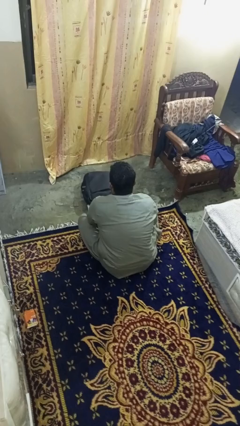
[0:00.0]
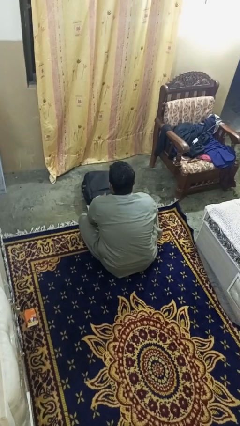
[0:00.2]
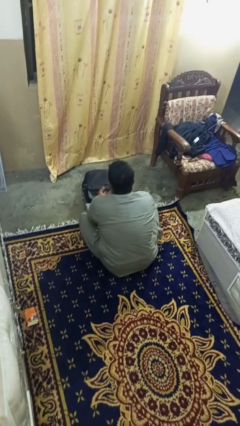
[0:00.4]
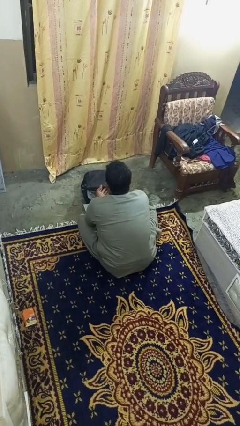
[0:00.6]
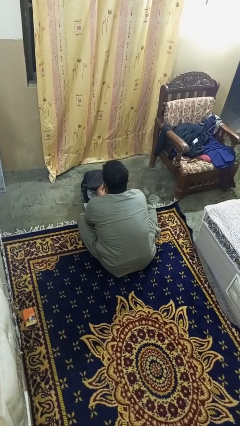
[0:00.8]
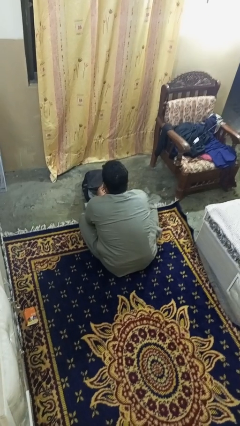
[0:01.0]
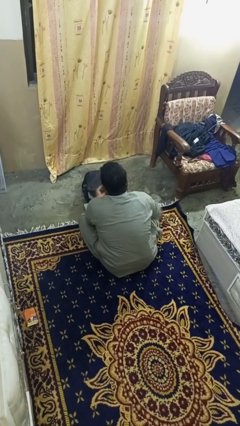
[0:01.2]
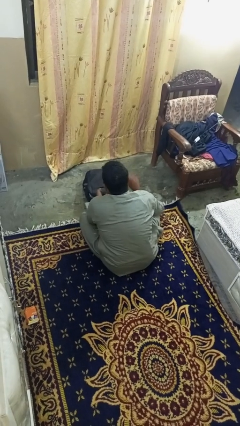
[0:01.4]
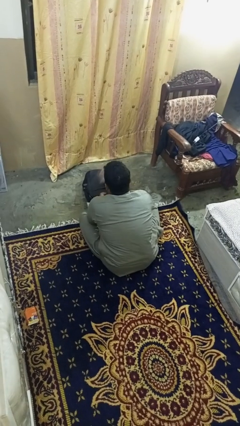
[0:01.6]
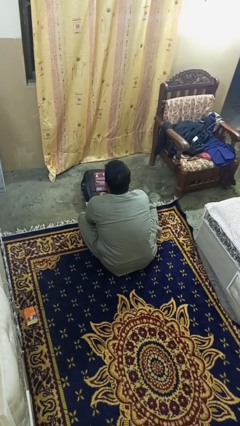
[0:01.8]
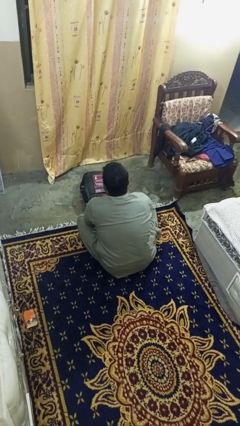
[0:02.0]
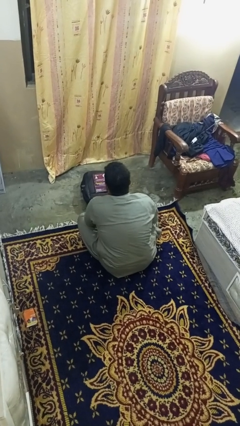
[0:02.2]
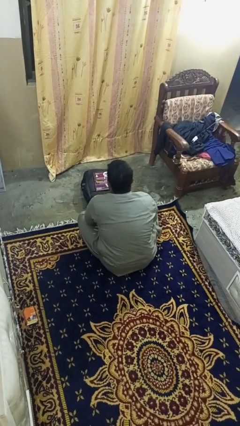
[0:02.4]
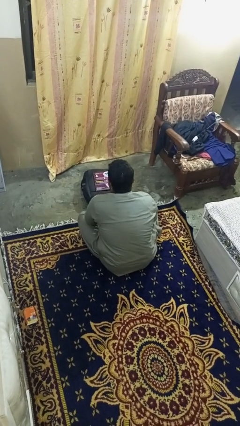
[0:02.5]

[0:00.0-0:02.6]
person takes object from bag

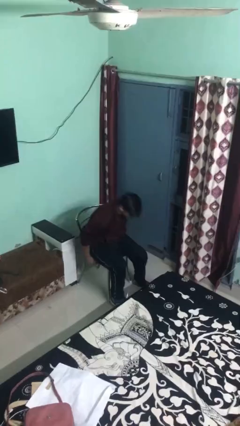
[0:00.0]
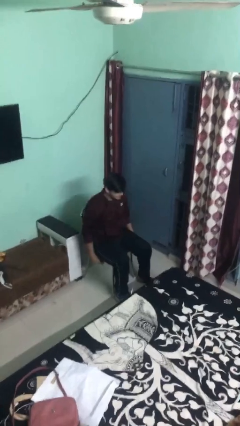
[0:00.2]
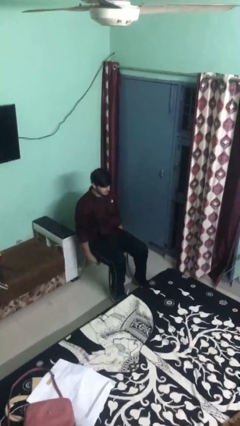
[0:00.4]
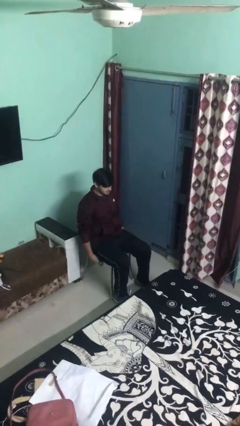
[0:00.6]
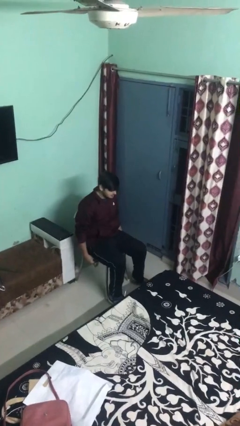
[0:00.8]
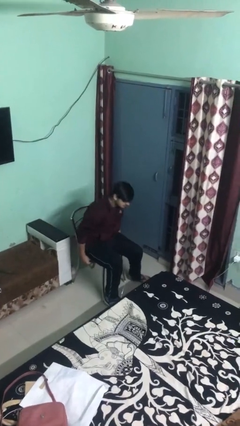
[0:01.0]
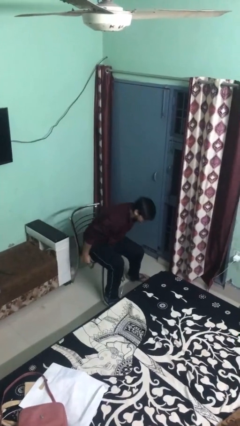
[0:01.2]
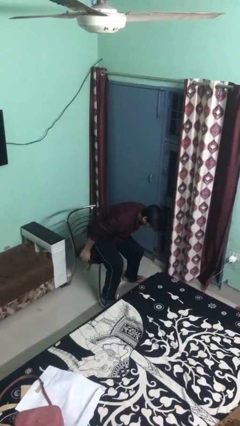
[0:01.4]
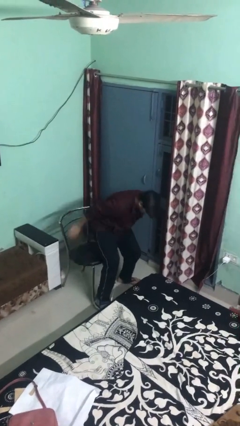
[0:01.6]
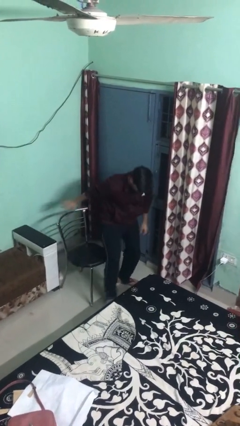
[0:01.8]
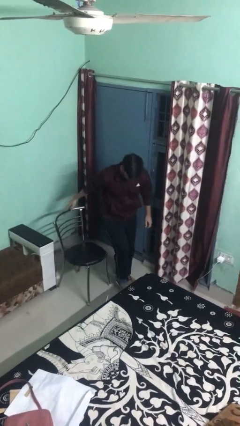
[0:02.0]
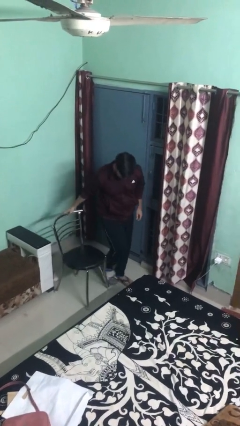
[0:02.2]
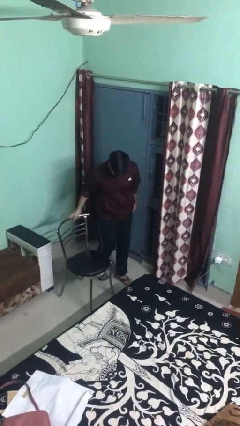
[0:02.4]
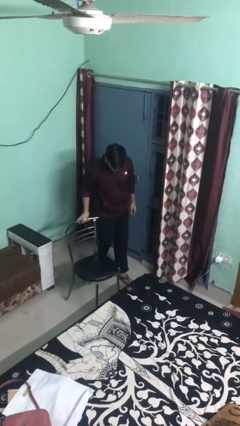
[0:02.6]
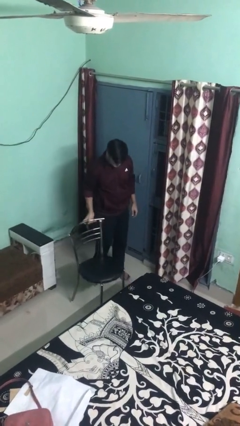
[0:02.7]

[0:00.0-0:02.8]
person stands up

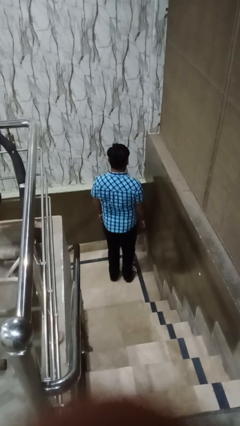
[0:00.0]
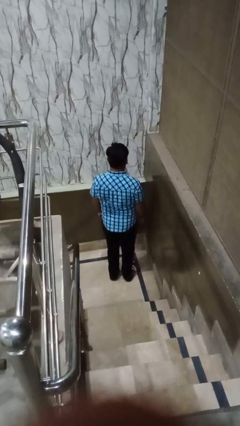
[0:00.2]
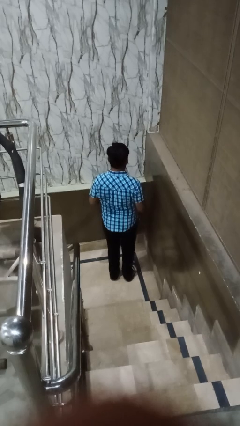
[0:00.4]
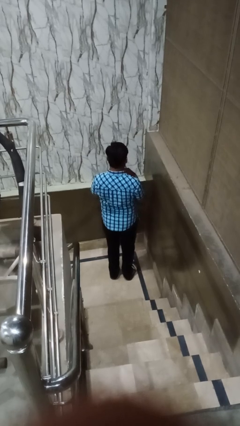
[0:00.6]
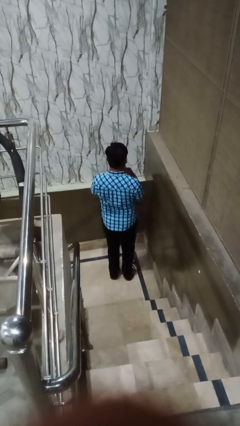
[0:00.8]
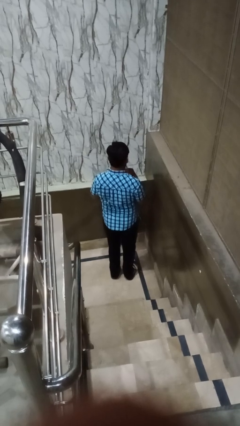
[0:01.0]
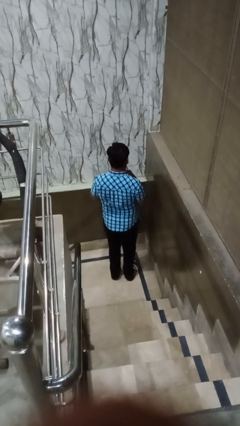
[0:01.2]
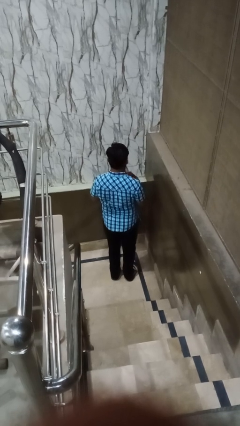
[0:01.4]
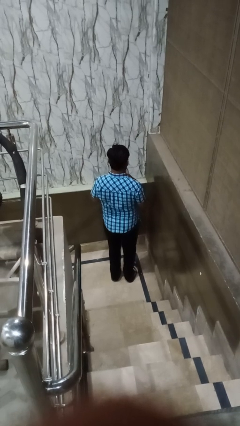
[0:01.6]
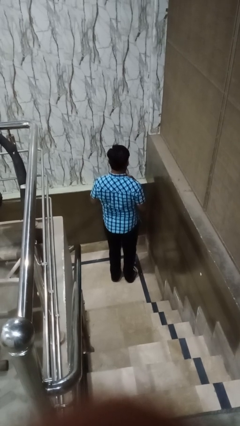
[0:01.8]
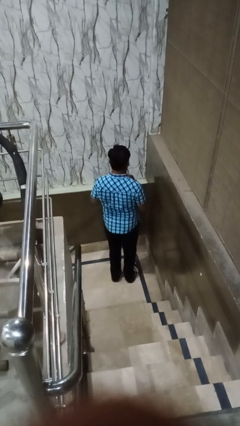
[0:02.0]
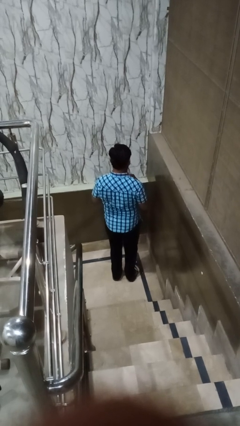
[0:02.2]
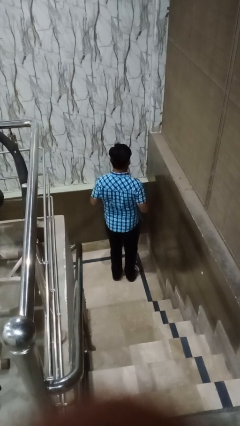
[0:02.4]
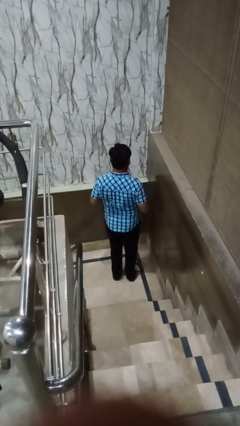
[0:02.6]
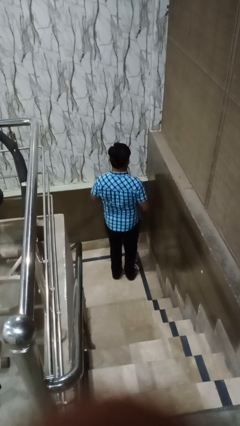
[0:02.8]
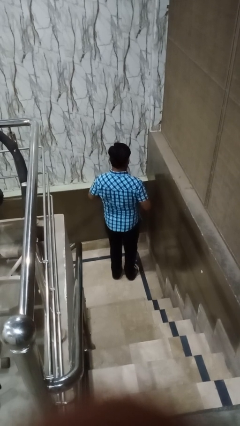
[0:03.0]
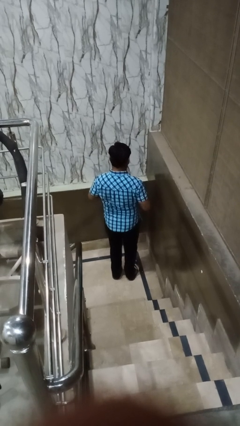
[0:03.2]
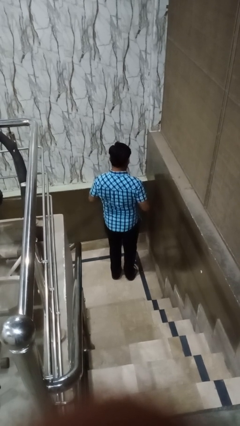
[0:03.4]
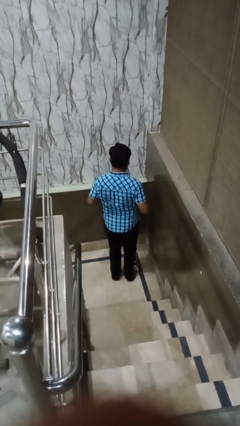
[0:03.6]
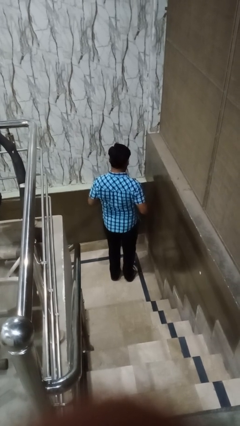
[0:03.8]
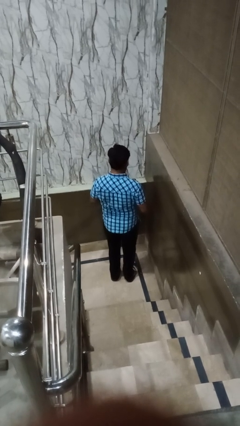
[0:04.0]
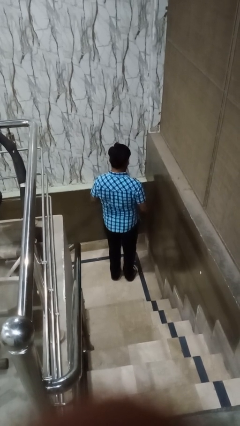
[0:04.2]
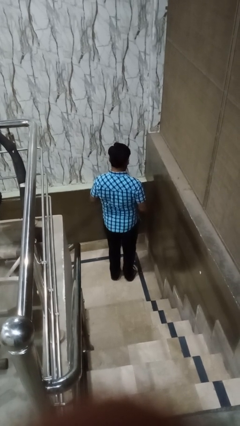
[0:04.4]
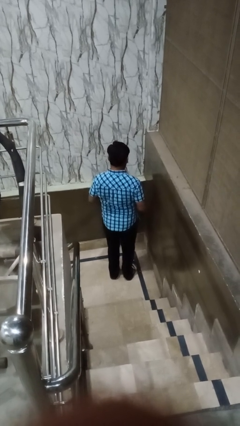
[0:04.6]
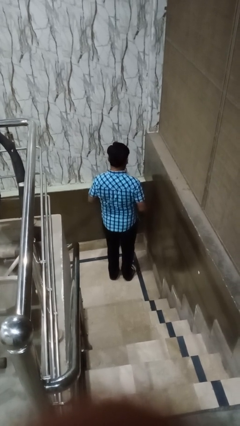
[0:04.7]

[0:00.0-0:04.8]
person unbuttons shirt

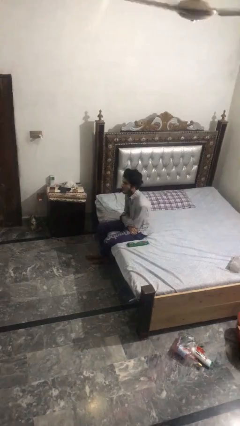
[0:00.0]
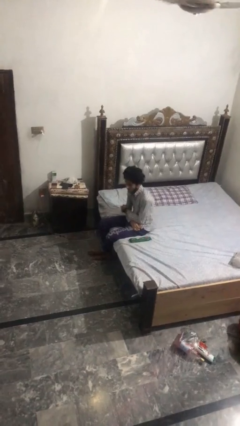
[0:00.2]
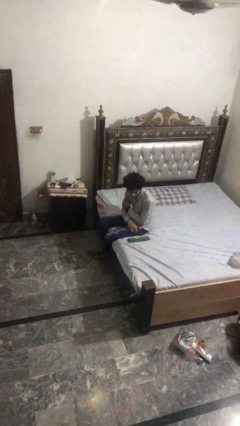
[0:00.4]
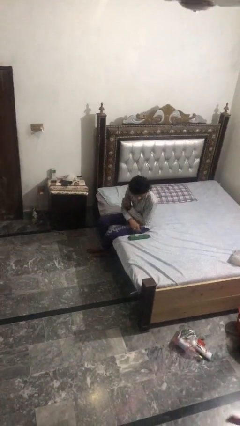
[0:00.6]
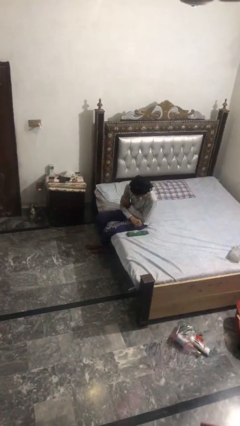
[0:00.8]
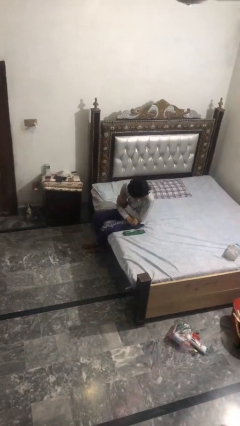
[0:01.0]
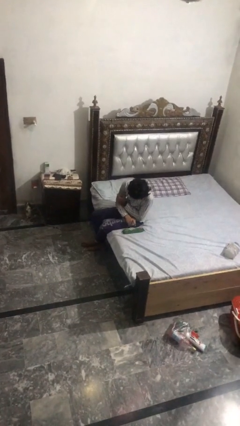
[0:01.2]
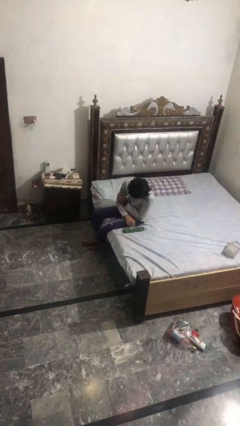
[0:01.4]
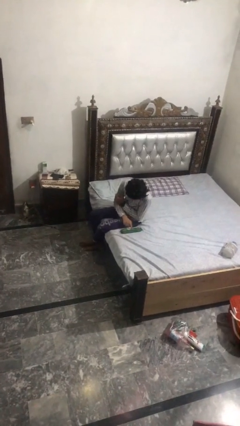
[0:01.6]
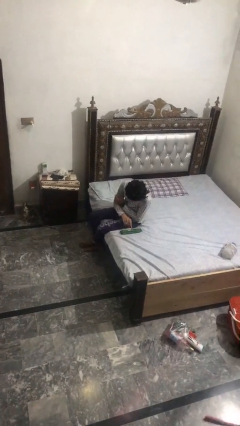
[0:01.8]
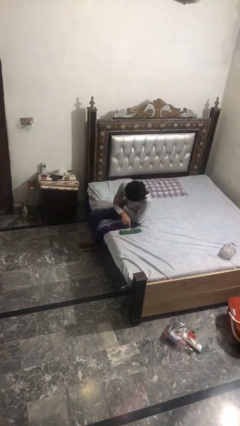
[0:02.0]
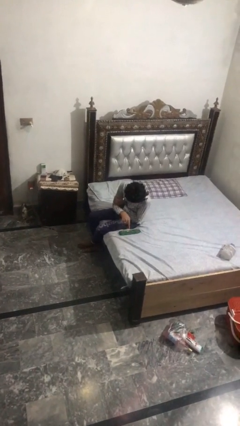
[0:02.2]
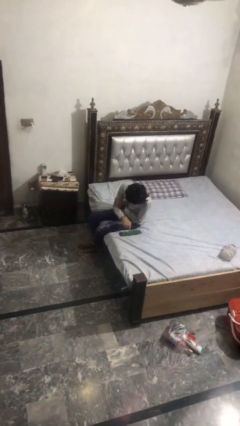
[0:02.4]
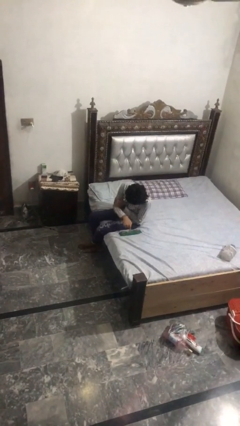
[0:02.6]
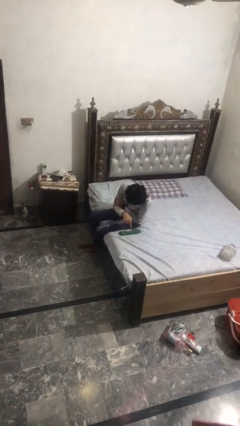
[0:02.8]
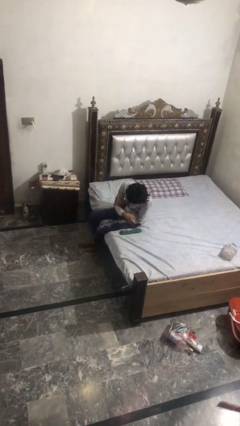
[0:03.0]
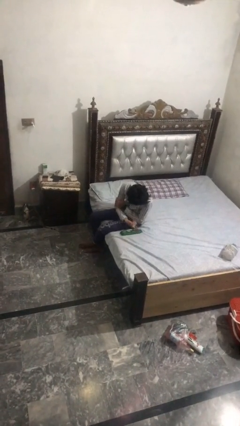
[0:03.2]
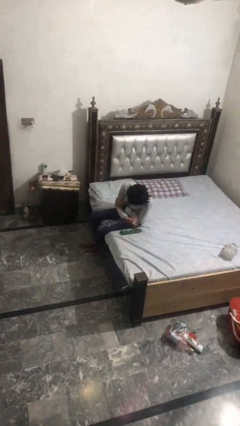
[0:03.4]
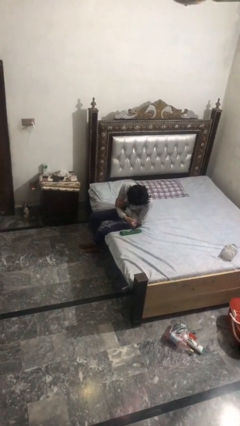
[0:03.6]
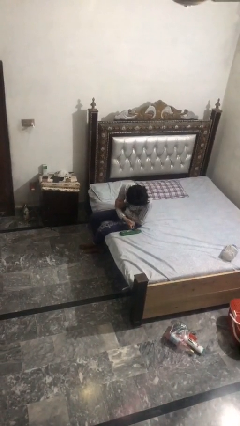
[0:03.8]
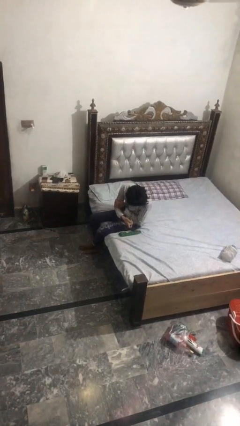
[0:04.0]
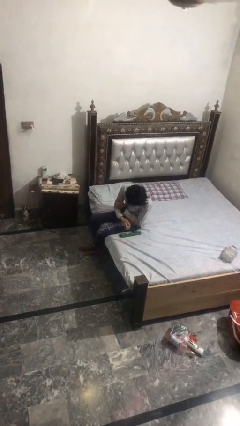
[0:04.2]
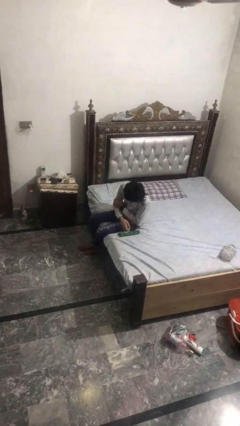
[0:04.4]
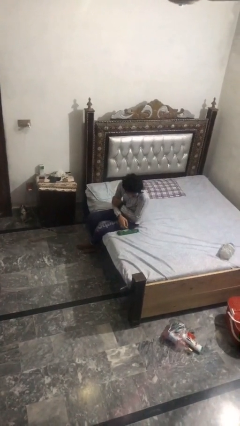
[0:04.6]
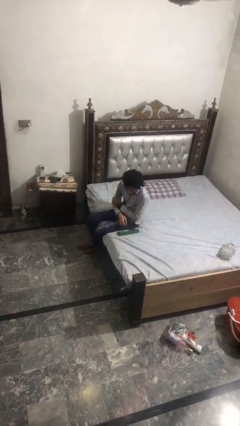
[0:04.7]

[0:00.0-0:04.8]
person taps object with finger

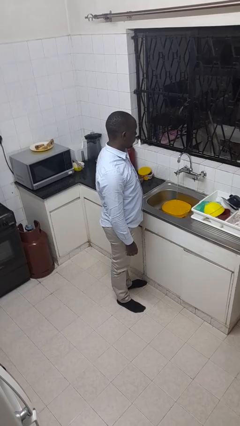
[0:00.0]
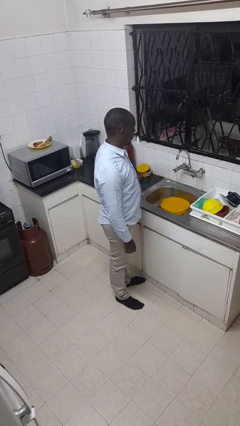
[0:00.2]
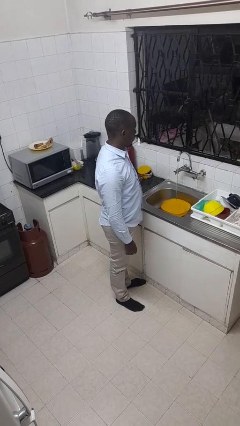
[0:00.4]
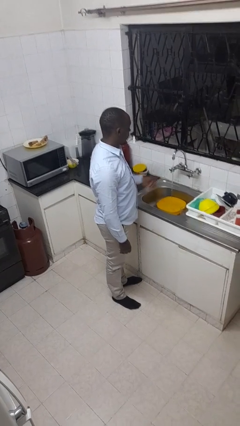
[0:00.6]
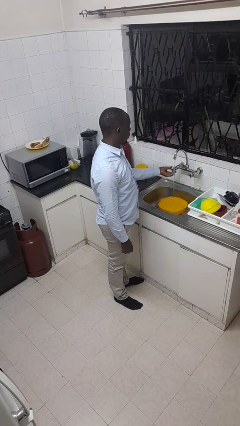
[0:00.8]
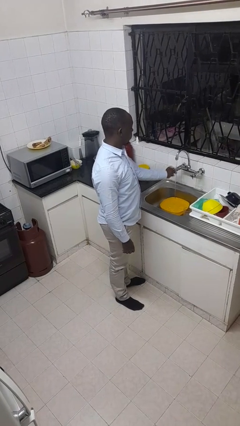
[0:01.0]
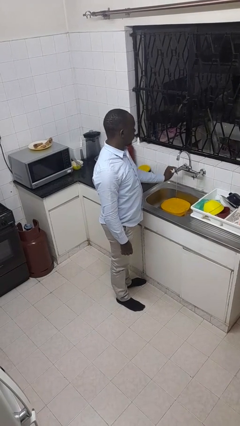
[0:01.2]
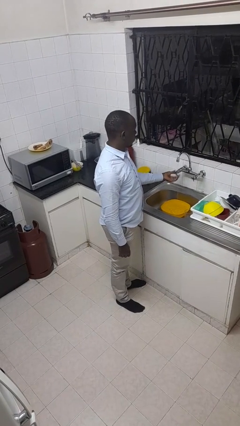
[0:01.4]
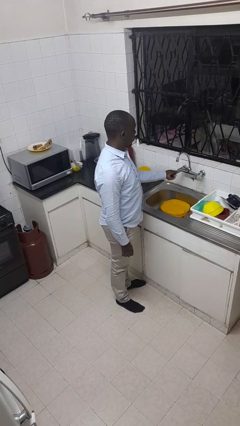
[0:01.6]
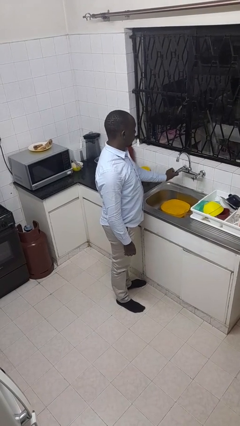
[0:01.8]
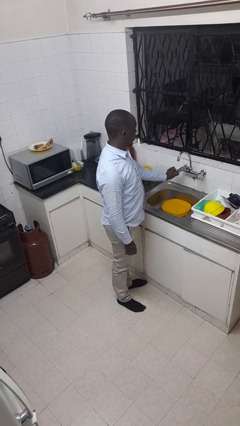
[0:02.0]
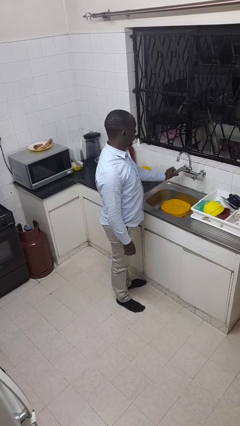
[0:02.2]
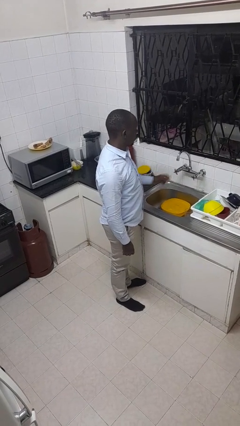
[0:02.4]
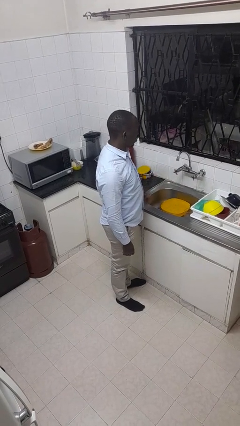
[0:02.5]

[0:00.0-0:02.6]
person turns off faucet
